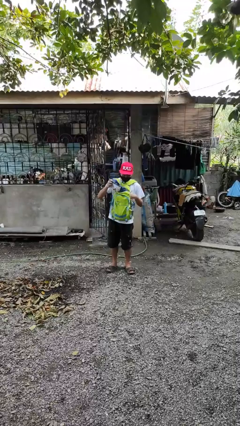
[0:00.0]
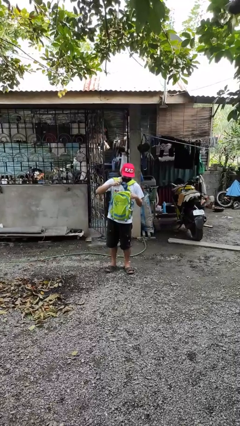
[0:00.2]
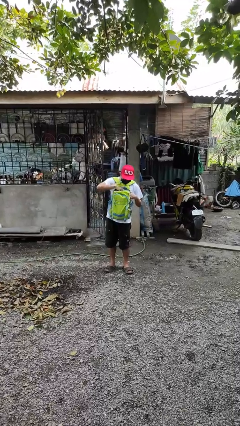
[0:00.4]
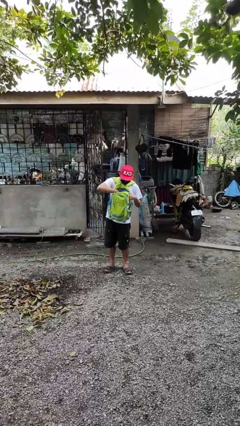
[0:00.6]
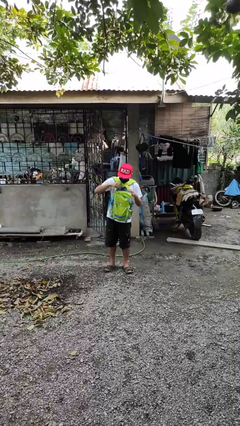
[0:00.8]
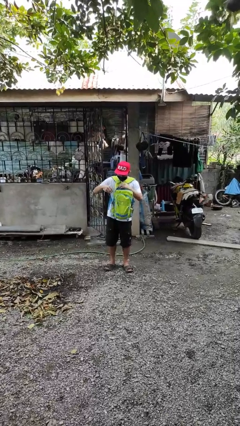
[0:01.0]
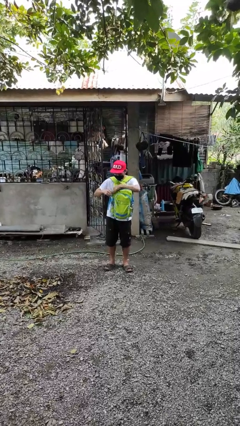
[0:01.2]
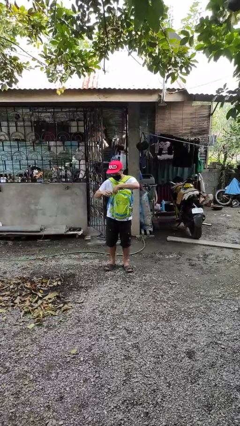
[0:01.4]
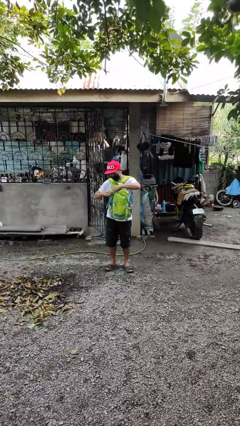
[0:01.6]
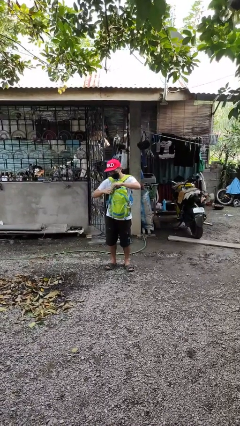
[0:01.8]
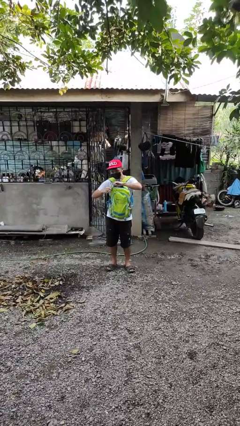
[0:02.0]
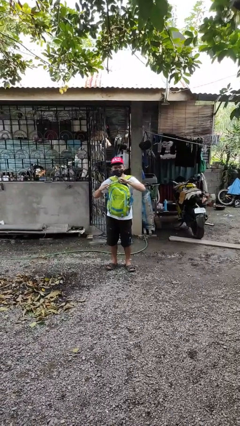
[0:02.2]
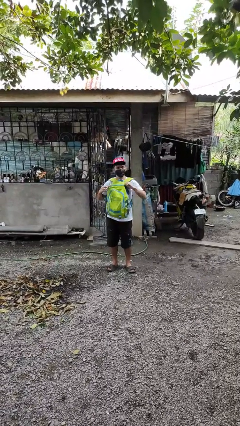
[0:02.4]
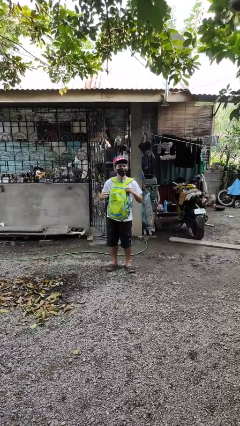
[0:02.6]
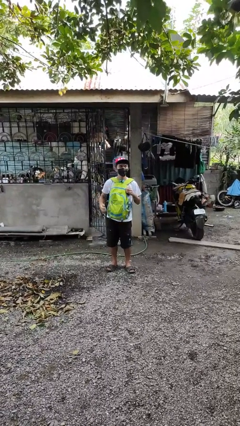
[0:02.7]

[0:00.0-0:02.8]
person puts object into backpack

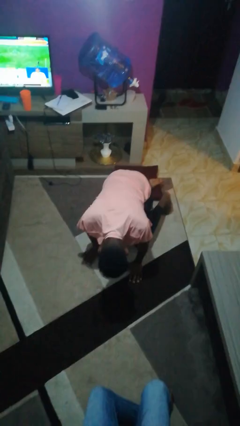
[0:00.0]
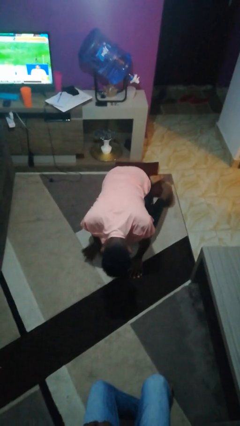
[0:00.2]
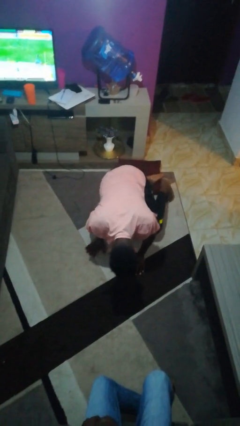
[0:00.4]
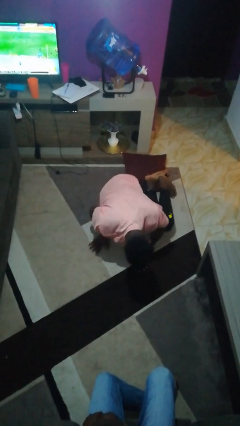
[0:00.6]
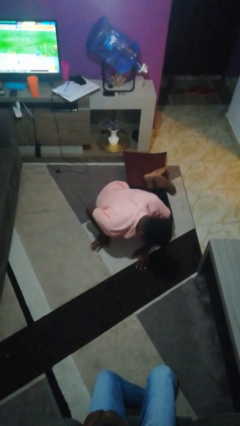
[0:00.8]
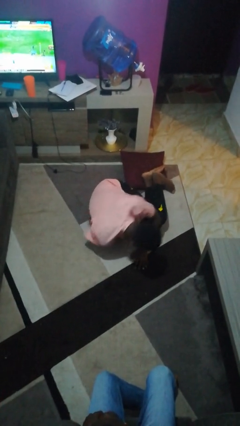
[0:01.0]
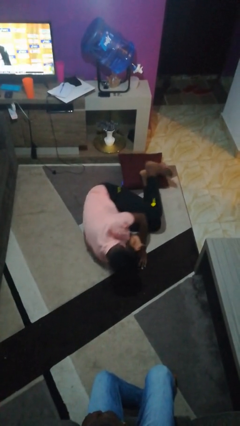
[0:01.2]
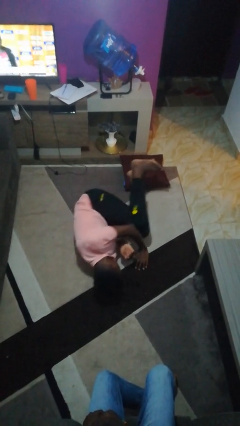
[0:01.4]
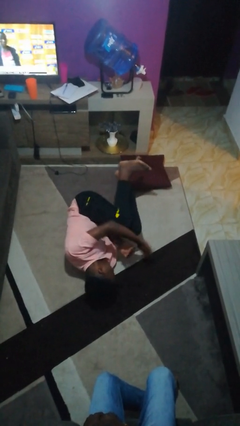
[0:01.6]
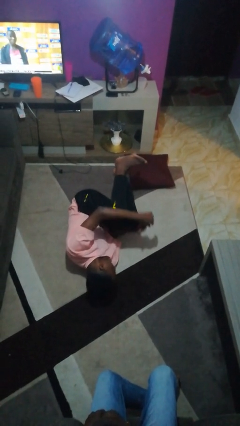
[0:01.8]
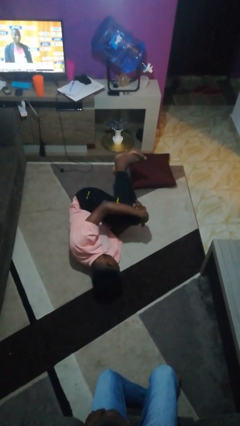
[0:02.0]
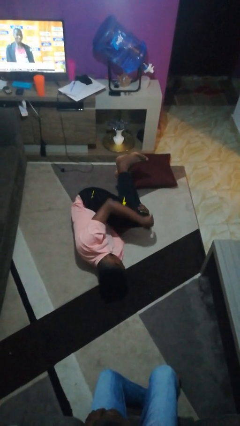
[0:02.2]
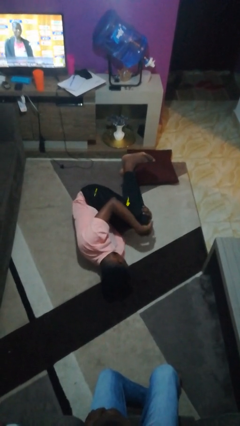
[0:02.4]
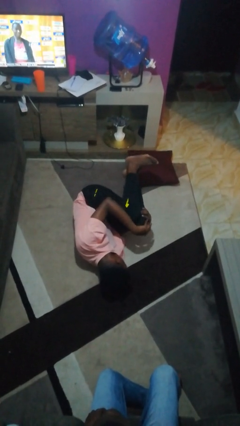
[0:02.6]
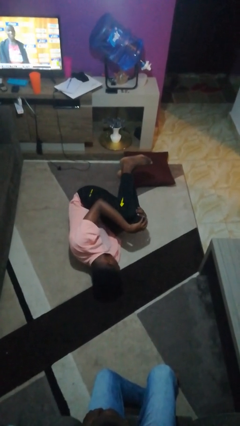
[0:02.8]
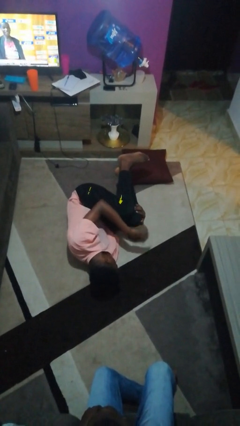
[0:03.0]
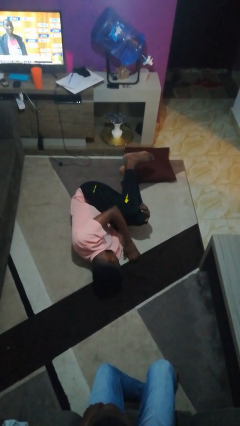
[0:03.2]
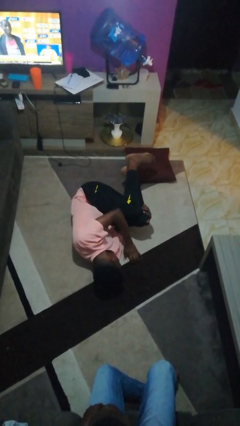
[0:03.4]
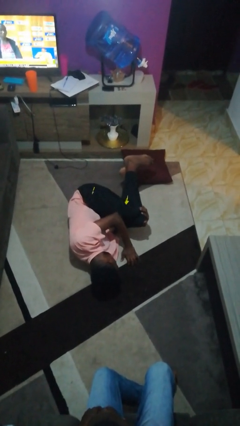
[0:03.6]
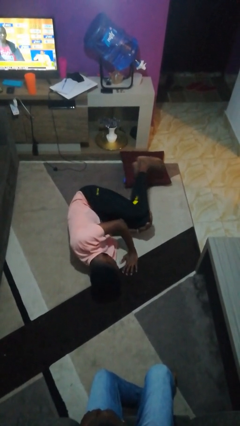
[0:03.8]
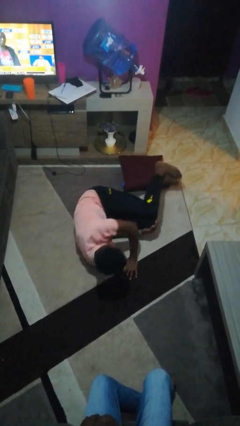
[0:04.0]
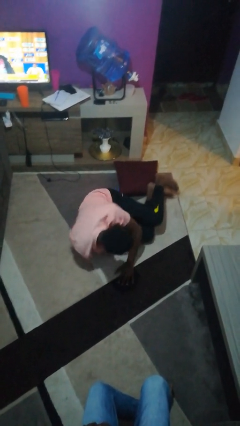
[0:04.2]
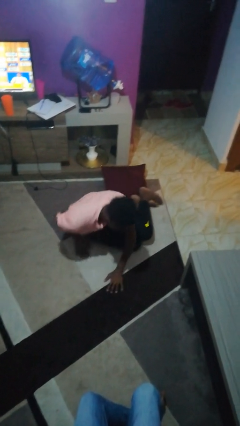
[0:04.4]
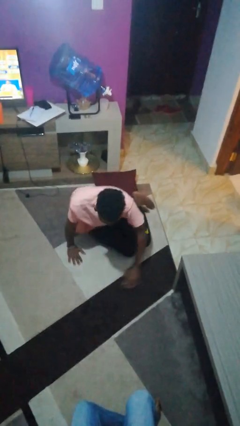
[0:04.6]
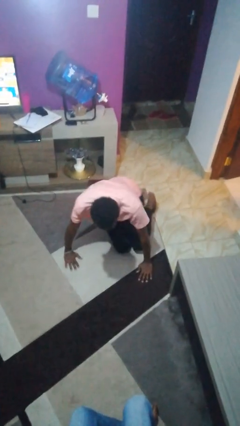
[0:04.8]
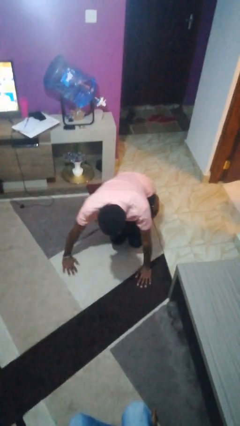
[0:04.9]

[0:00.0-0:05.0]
person lies down on floor

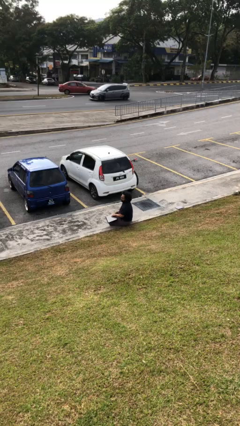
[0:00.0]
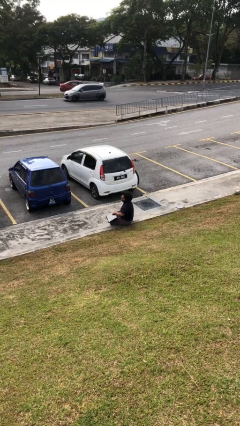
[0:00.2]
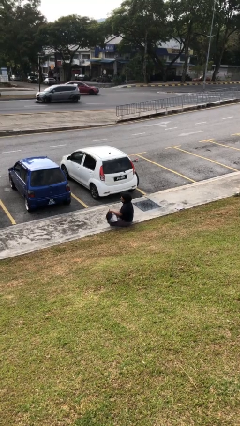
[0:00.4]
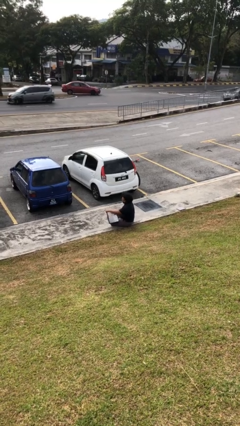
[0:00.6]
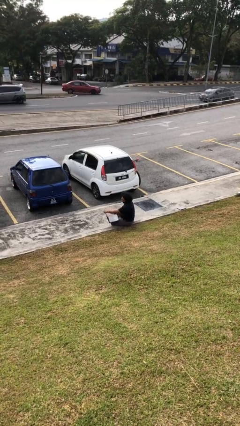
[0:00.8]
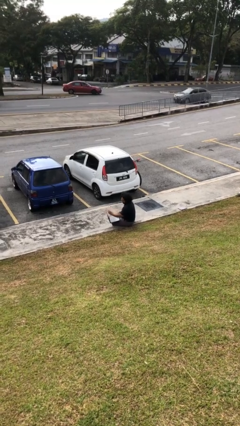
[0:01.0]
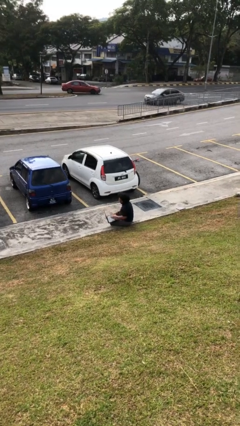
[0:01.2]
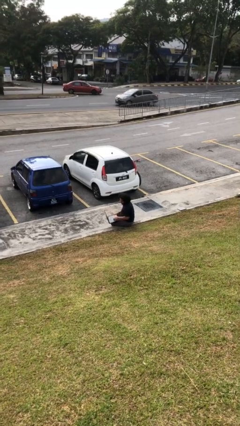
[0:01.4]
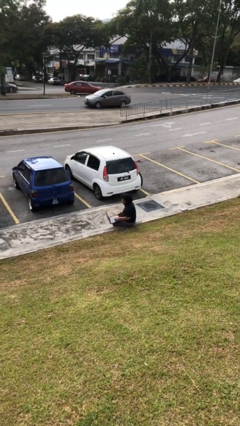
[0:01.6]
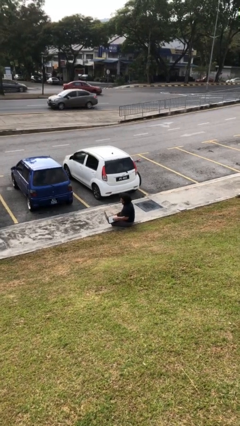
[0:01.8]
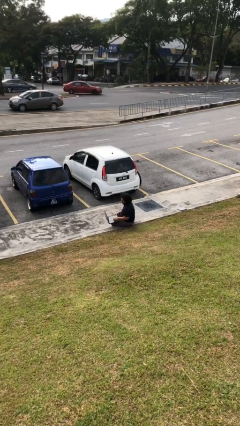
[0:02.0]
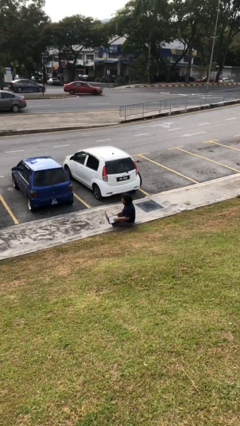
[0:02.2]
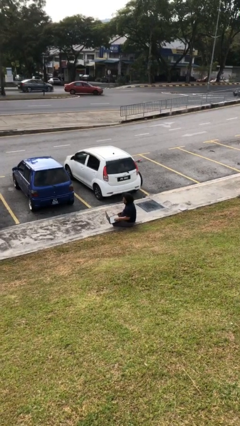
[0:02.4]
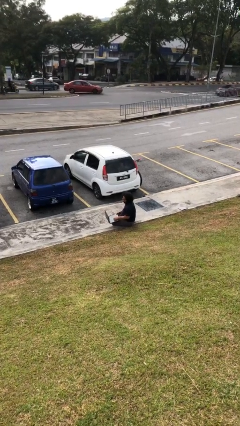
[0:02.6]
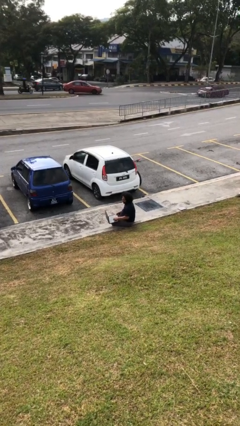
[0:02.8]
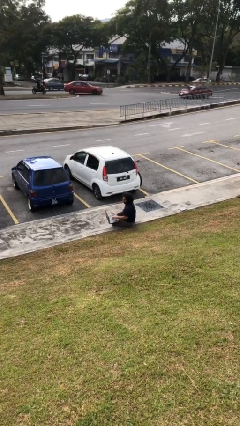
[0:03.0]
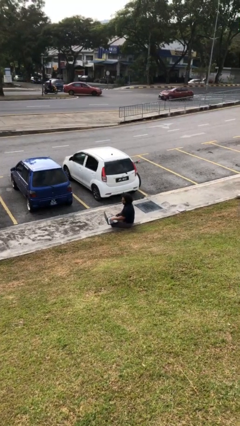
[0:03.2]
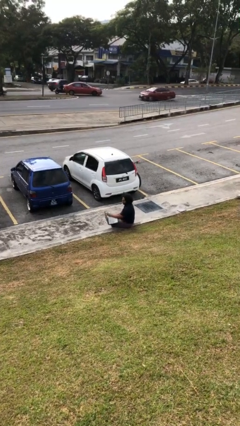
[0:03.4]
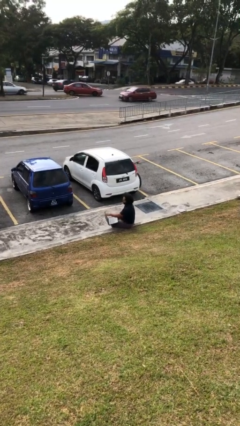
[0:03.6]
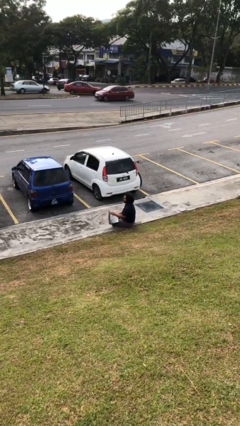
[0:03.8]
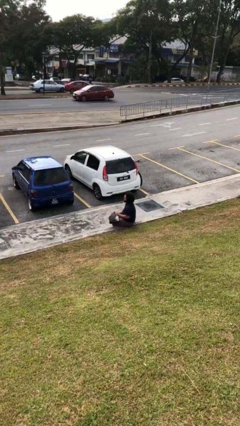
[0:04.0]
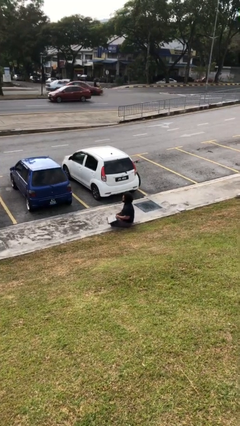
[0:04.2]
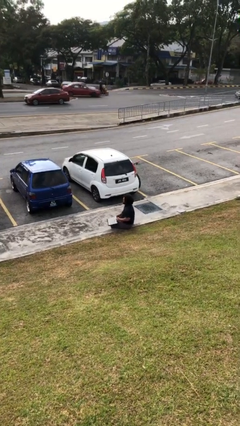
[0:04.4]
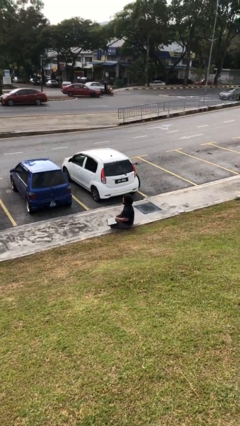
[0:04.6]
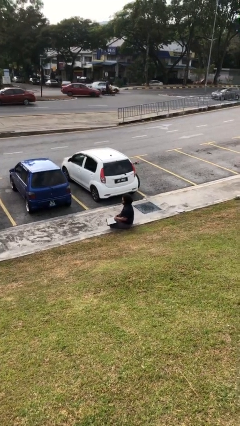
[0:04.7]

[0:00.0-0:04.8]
person interacts with laptop

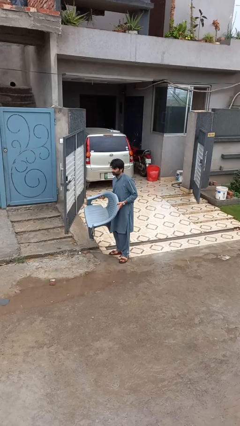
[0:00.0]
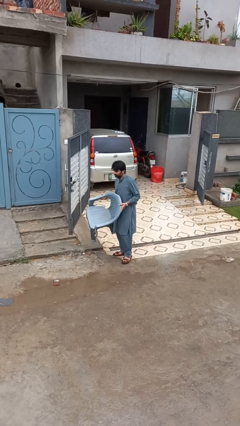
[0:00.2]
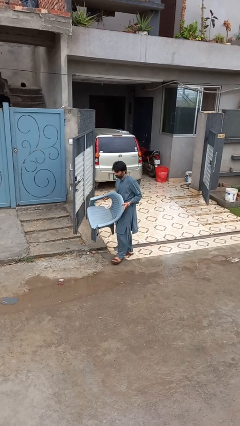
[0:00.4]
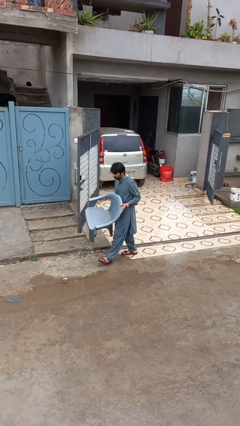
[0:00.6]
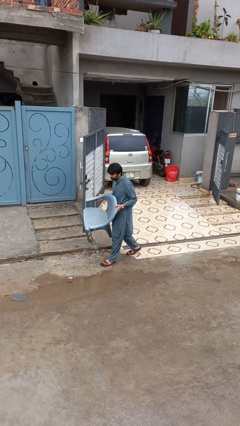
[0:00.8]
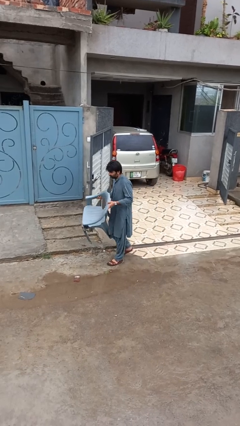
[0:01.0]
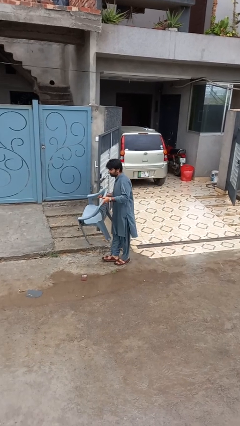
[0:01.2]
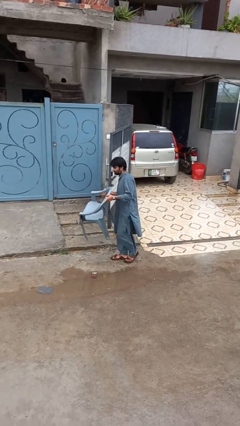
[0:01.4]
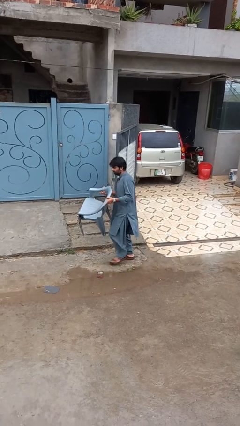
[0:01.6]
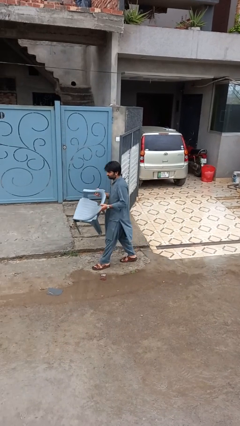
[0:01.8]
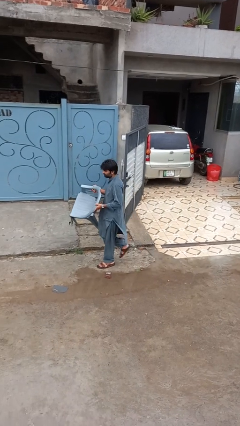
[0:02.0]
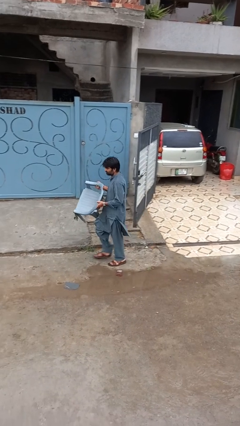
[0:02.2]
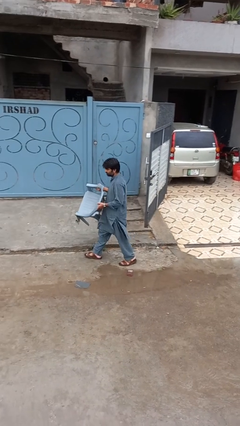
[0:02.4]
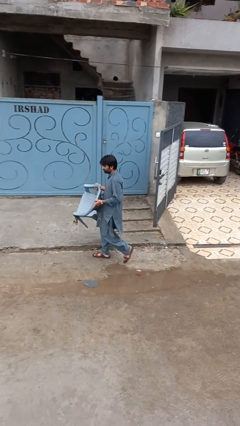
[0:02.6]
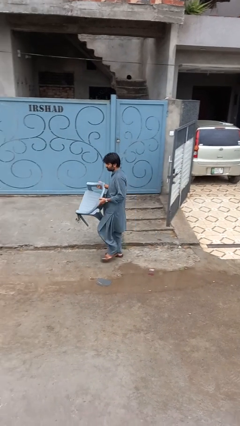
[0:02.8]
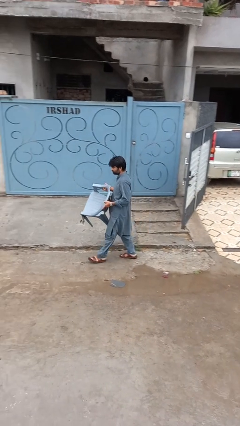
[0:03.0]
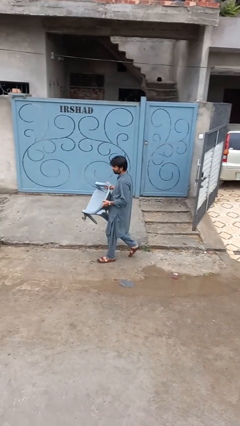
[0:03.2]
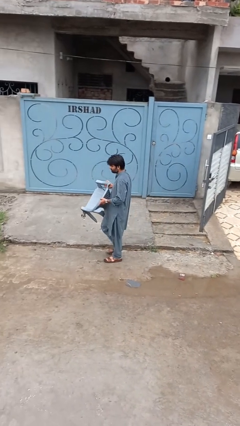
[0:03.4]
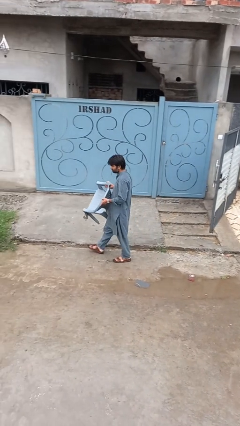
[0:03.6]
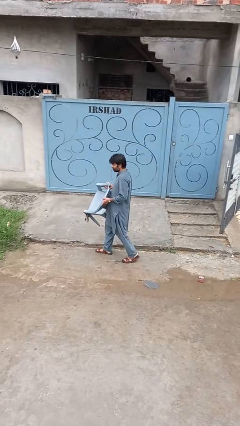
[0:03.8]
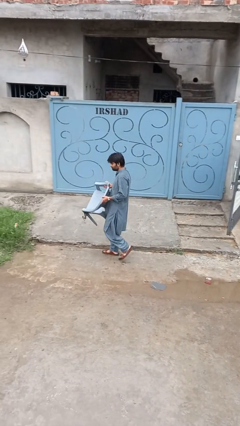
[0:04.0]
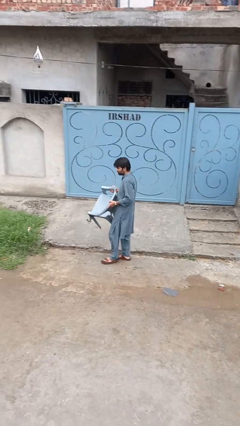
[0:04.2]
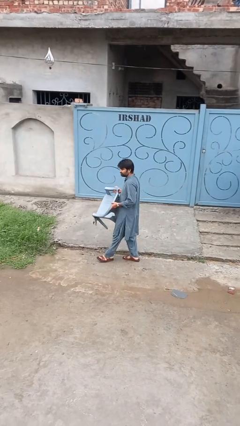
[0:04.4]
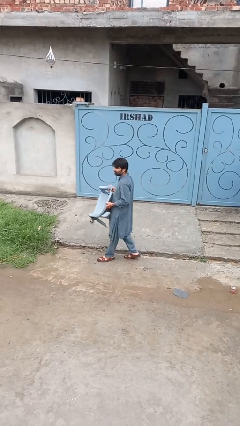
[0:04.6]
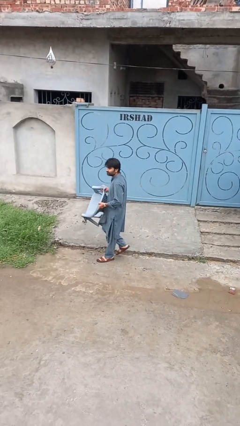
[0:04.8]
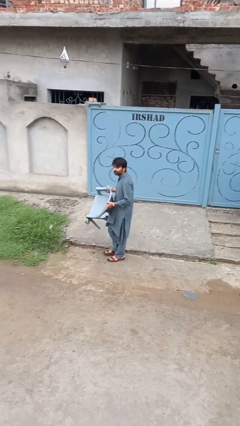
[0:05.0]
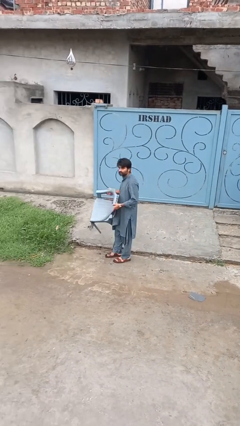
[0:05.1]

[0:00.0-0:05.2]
person carries furniture
